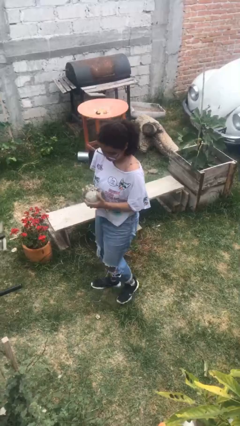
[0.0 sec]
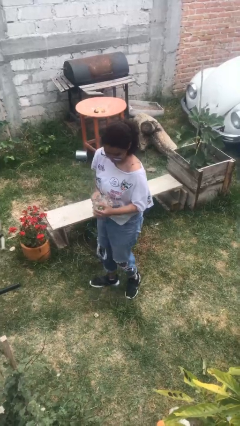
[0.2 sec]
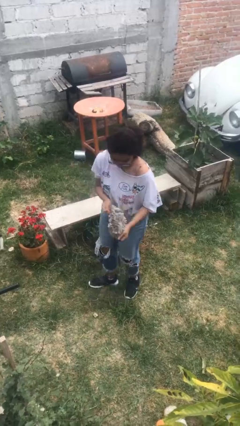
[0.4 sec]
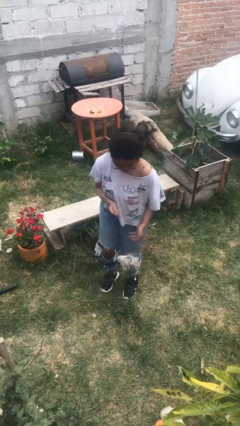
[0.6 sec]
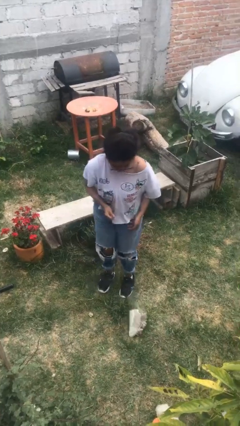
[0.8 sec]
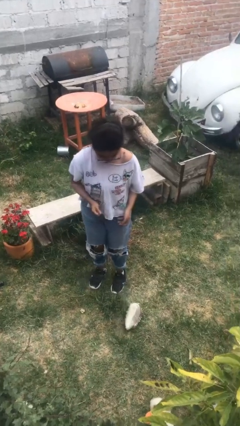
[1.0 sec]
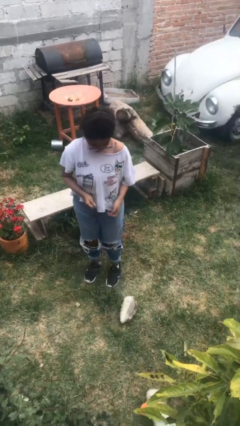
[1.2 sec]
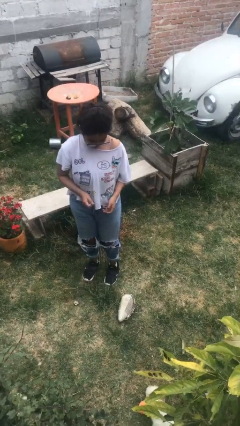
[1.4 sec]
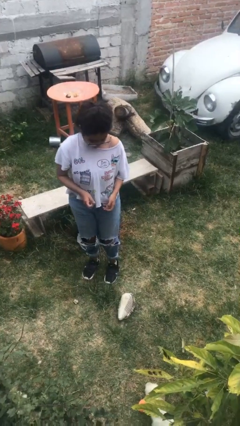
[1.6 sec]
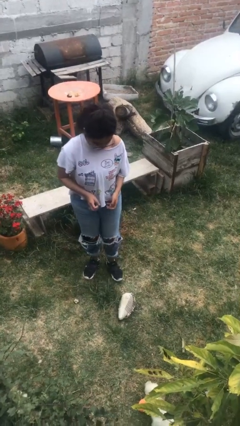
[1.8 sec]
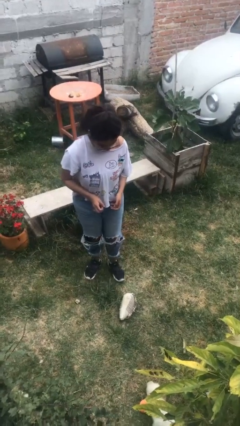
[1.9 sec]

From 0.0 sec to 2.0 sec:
person drops object

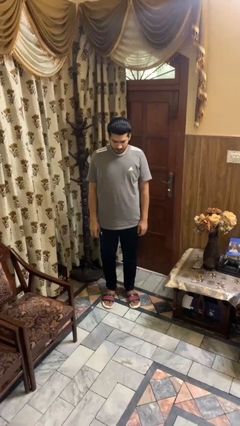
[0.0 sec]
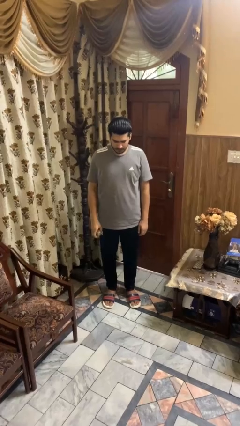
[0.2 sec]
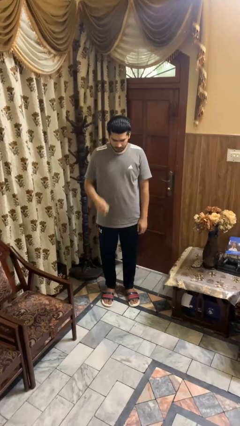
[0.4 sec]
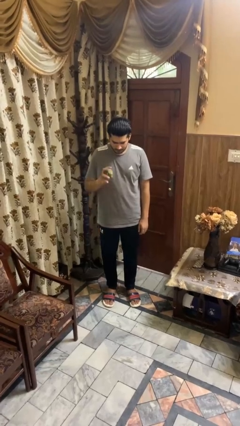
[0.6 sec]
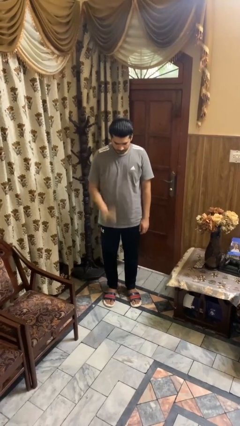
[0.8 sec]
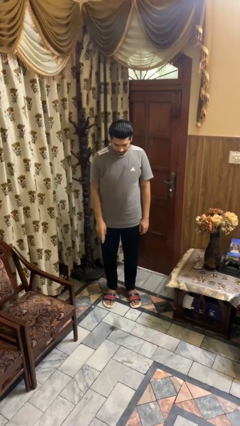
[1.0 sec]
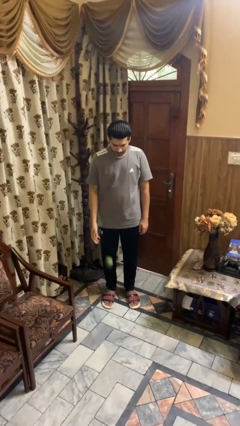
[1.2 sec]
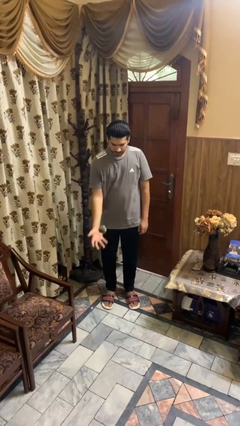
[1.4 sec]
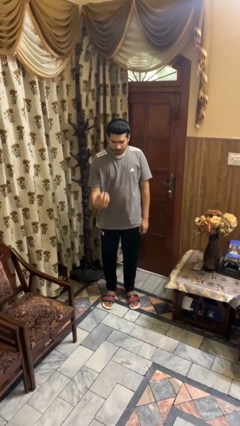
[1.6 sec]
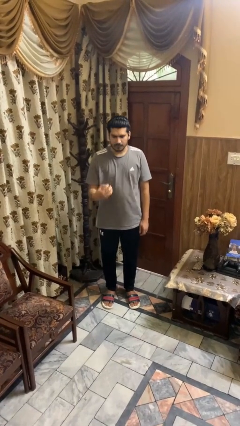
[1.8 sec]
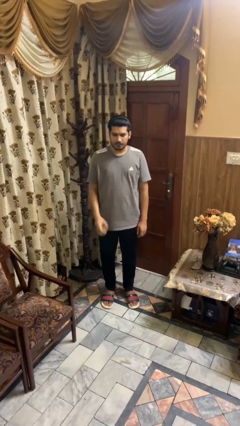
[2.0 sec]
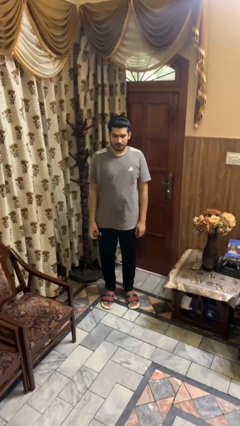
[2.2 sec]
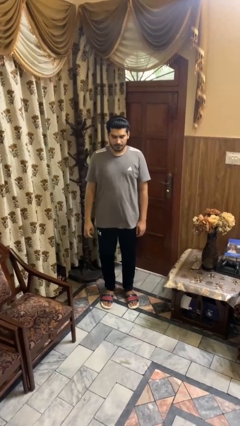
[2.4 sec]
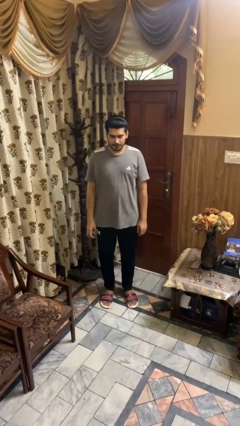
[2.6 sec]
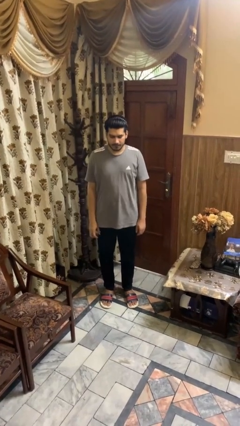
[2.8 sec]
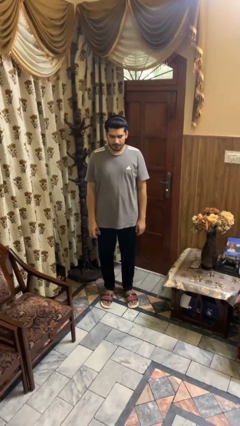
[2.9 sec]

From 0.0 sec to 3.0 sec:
person bounces ball on floor

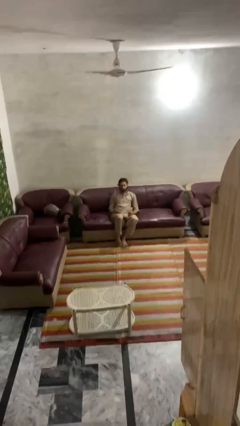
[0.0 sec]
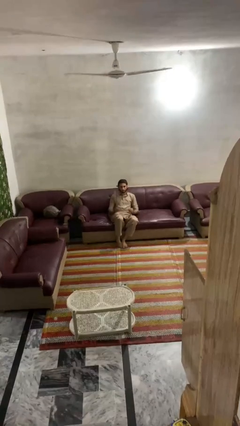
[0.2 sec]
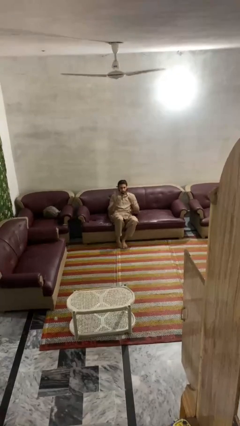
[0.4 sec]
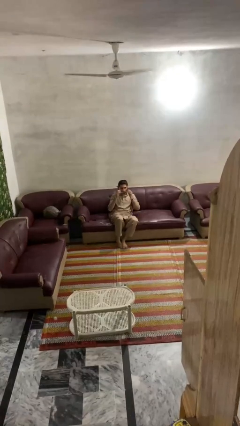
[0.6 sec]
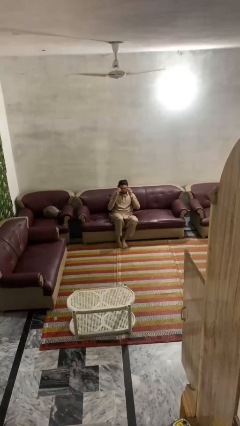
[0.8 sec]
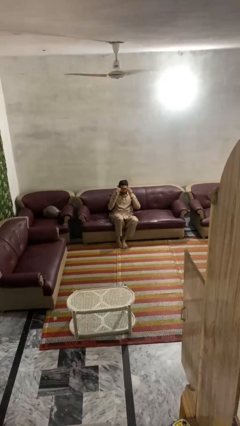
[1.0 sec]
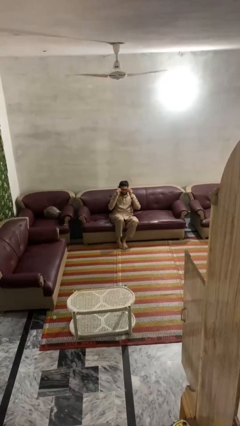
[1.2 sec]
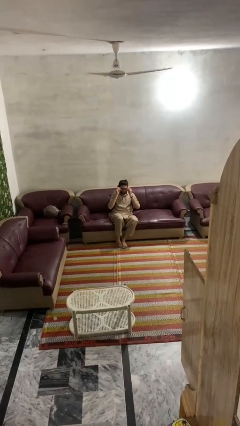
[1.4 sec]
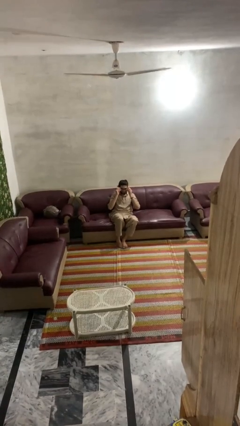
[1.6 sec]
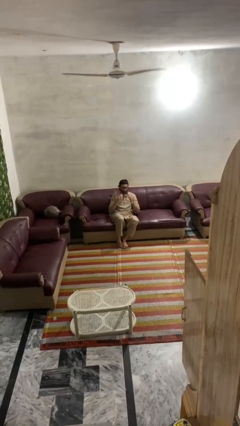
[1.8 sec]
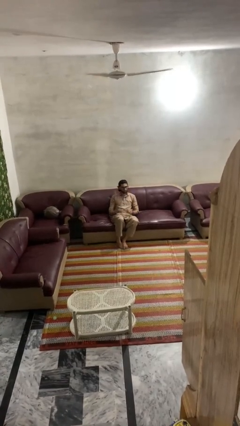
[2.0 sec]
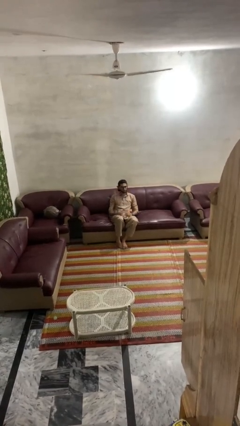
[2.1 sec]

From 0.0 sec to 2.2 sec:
person puts on glasses

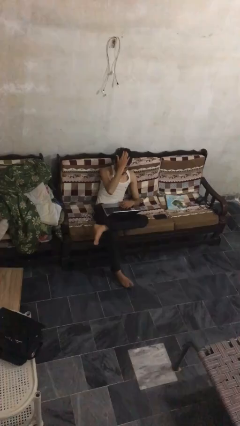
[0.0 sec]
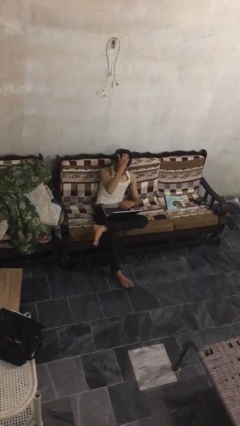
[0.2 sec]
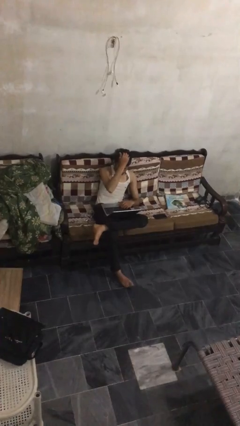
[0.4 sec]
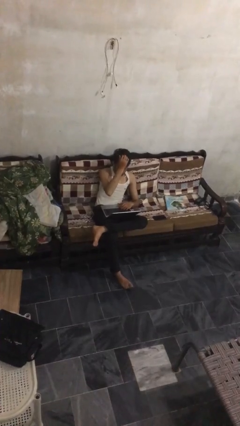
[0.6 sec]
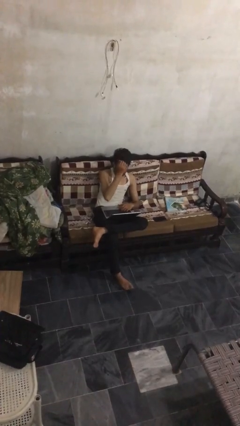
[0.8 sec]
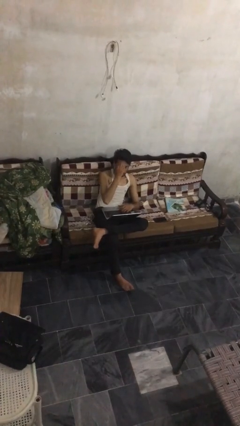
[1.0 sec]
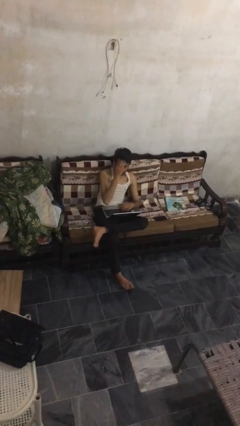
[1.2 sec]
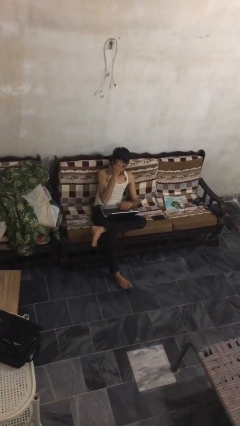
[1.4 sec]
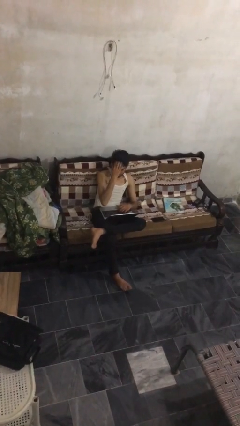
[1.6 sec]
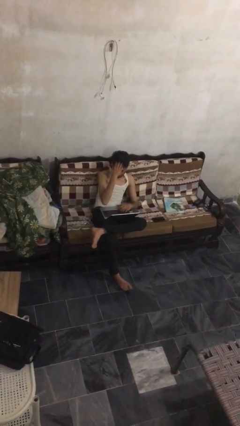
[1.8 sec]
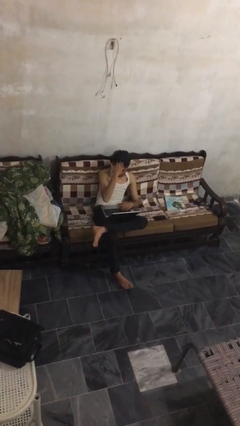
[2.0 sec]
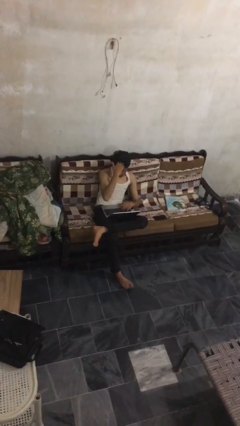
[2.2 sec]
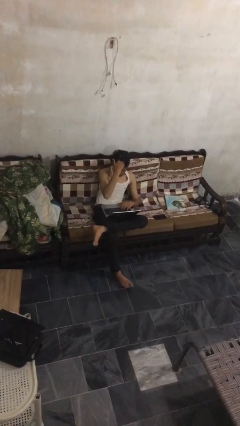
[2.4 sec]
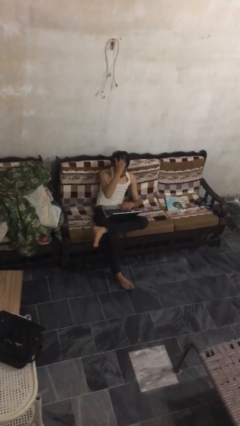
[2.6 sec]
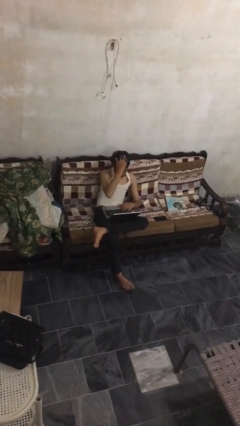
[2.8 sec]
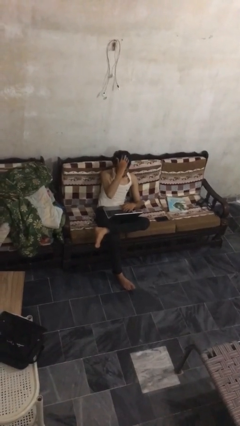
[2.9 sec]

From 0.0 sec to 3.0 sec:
person interacts with laptop

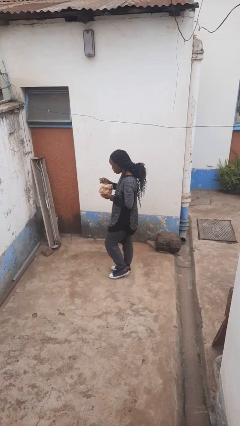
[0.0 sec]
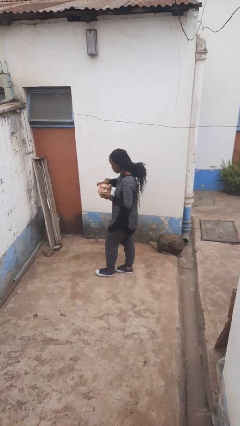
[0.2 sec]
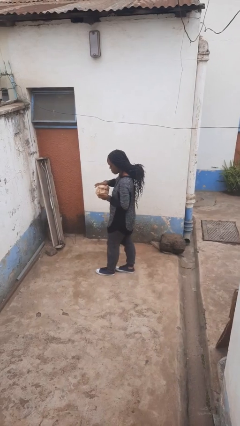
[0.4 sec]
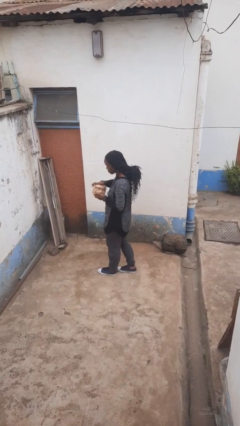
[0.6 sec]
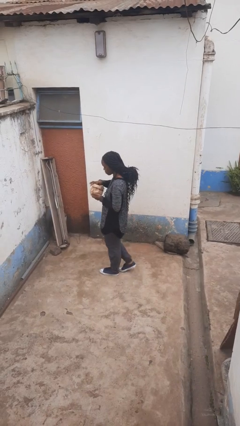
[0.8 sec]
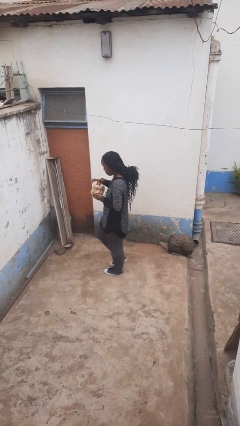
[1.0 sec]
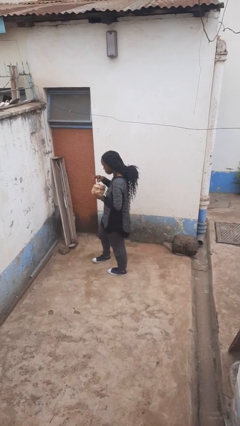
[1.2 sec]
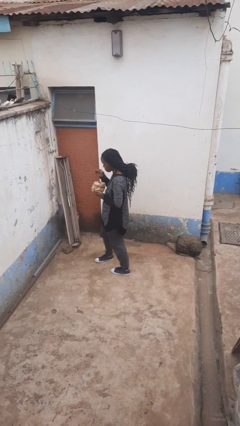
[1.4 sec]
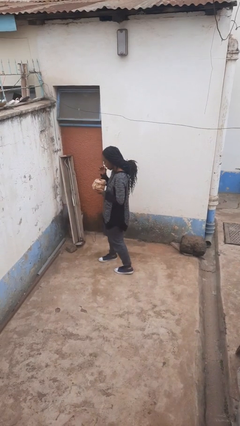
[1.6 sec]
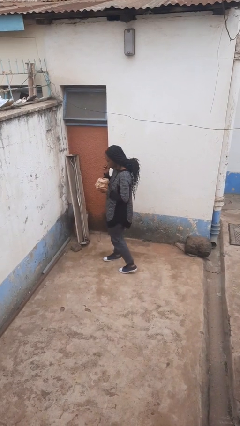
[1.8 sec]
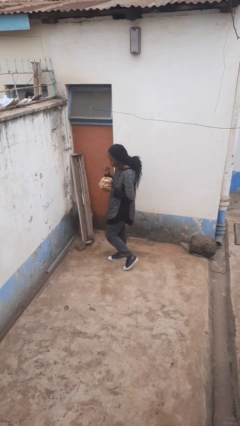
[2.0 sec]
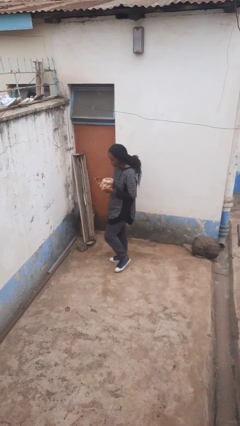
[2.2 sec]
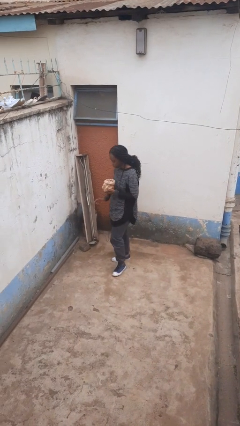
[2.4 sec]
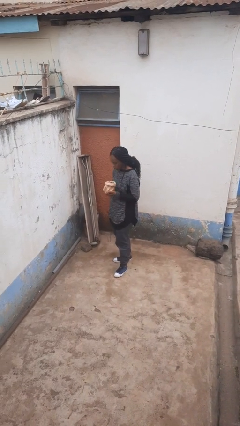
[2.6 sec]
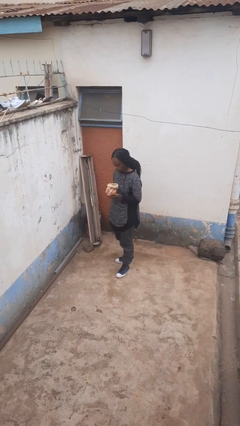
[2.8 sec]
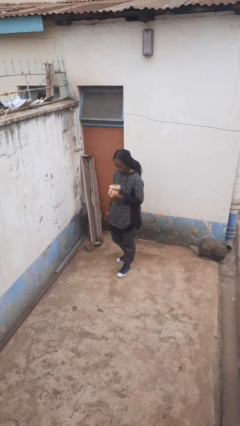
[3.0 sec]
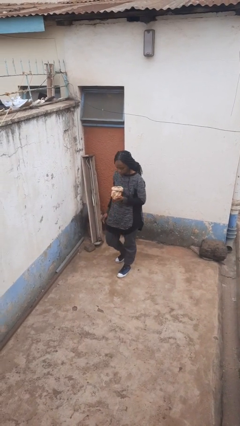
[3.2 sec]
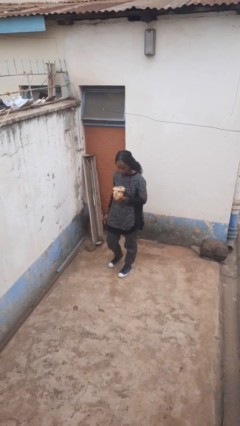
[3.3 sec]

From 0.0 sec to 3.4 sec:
person eats snack from bag

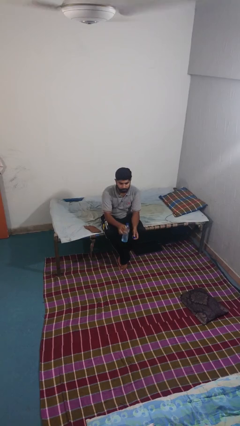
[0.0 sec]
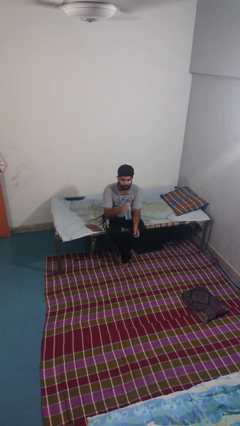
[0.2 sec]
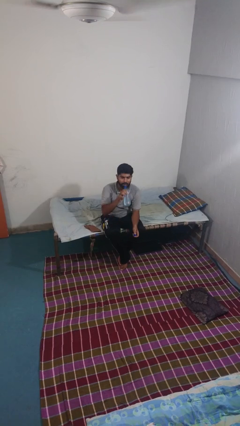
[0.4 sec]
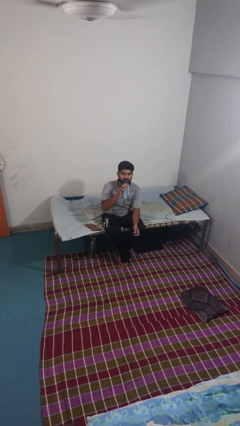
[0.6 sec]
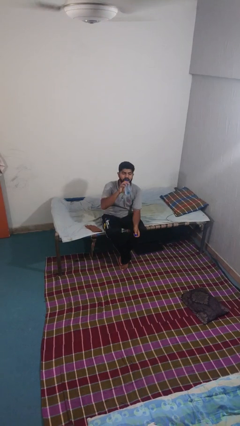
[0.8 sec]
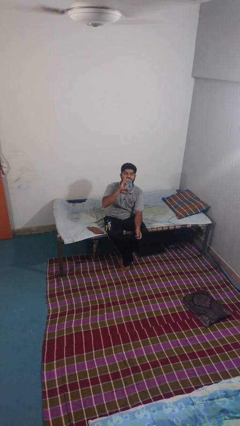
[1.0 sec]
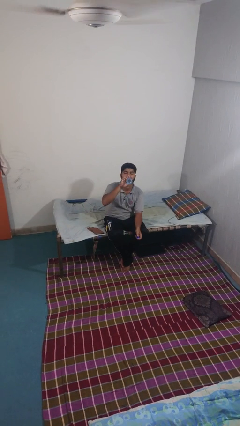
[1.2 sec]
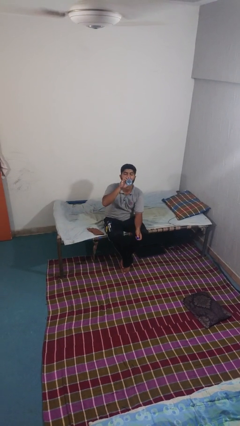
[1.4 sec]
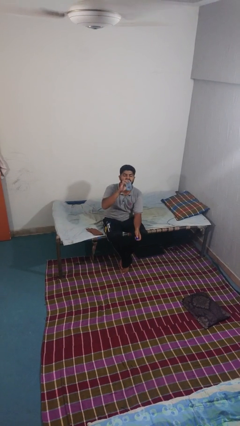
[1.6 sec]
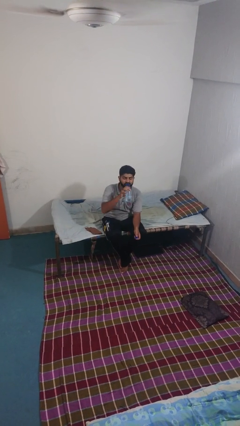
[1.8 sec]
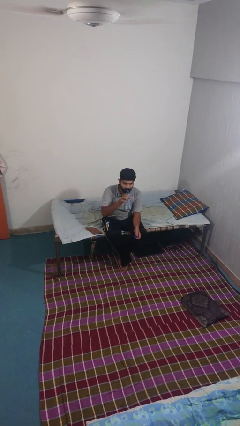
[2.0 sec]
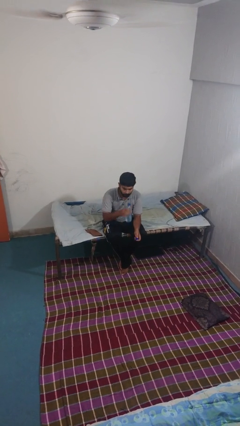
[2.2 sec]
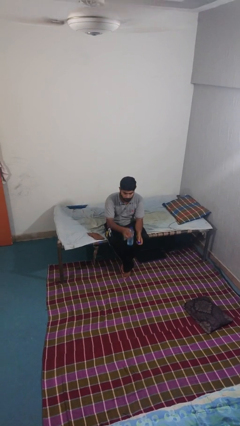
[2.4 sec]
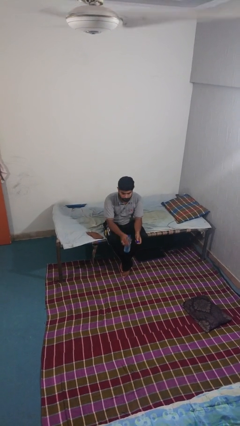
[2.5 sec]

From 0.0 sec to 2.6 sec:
person drinks from bottle

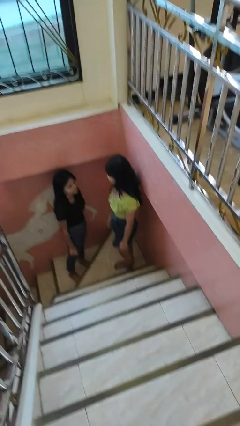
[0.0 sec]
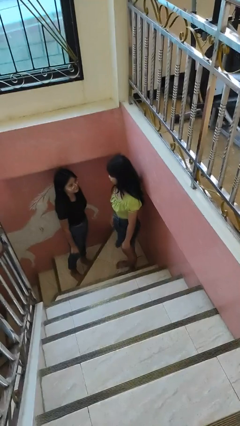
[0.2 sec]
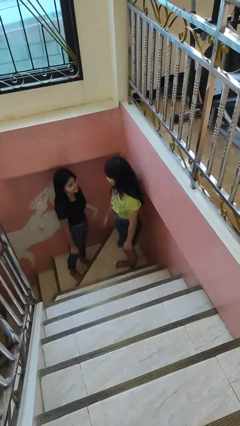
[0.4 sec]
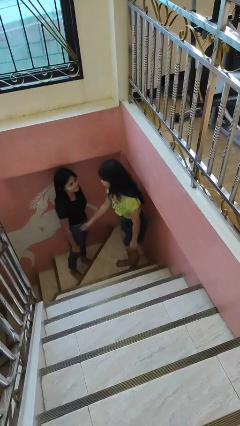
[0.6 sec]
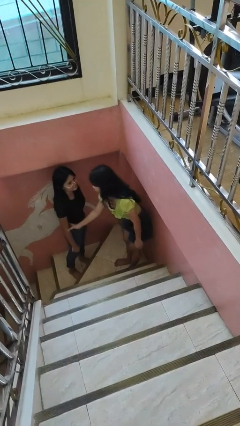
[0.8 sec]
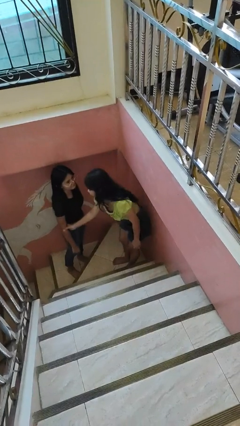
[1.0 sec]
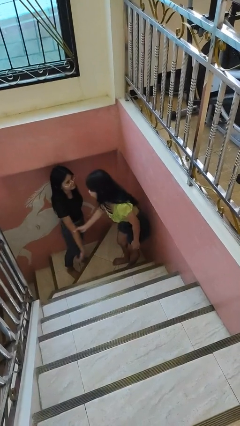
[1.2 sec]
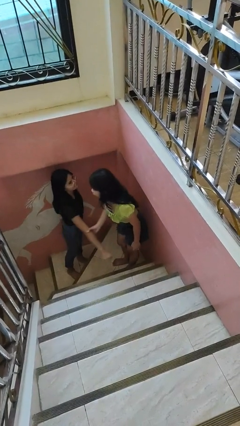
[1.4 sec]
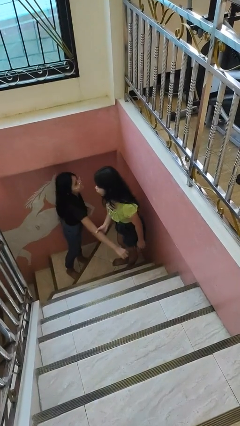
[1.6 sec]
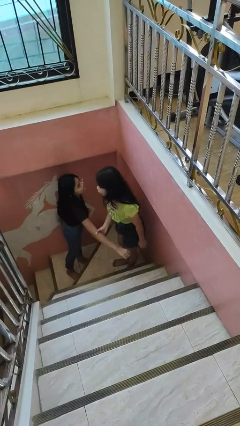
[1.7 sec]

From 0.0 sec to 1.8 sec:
person grabs person by forearm
